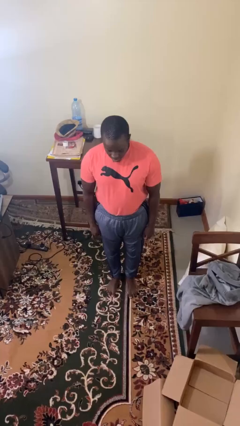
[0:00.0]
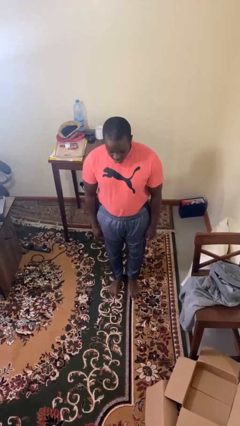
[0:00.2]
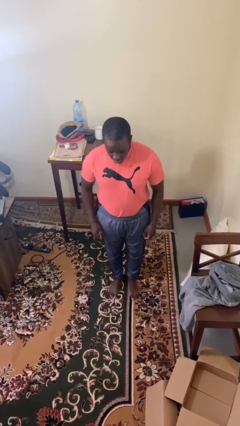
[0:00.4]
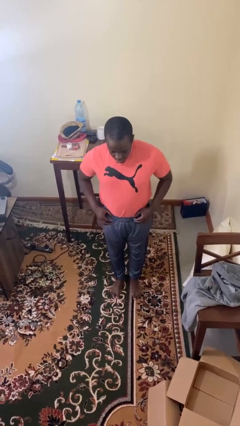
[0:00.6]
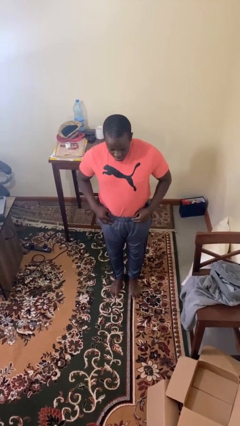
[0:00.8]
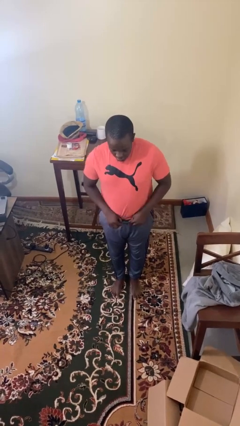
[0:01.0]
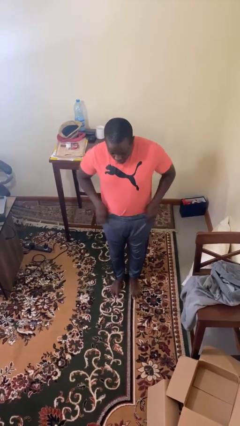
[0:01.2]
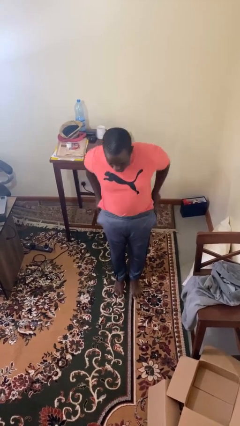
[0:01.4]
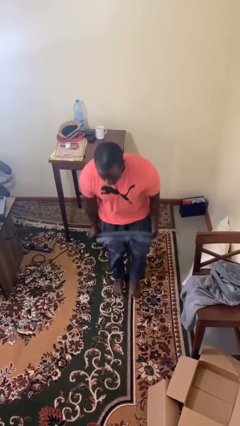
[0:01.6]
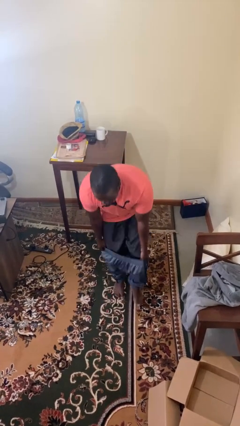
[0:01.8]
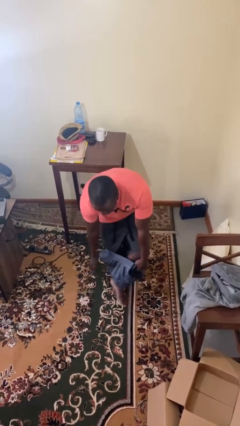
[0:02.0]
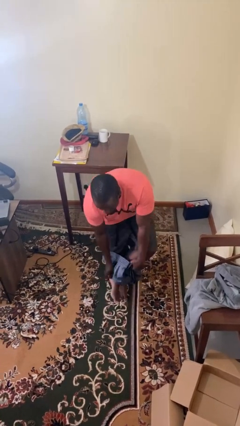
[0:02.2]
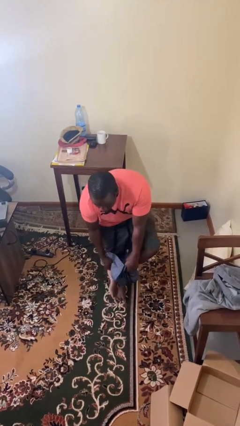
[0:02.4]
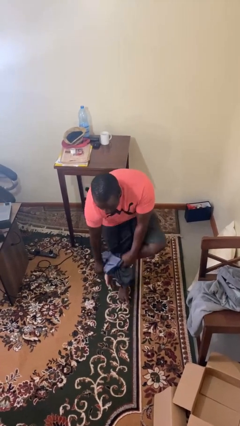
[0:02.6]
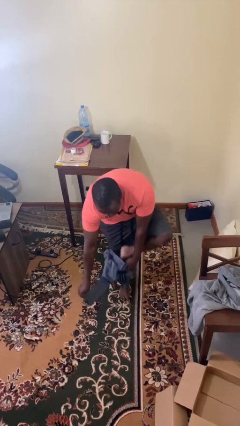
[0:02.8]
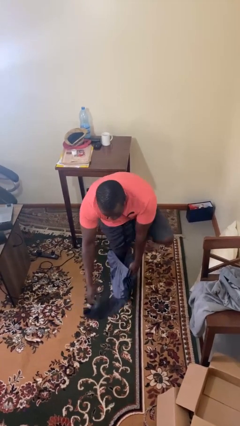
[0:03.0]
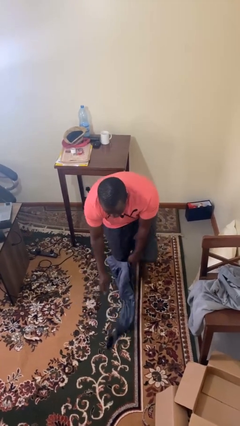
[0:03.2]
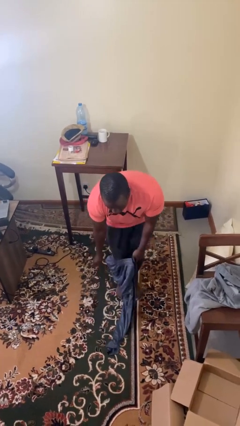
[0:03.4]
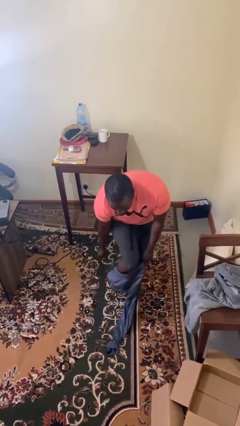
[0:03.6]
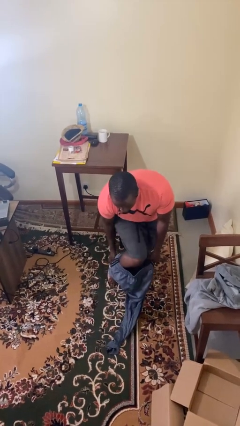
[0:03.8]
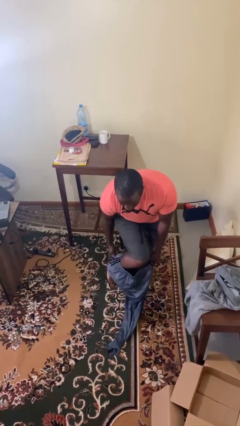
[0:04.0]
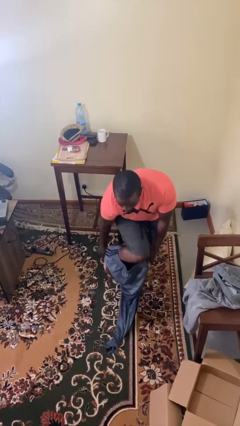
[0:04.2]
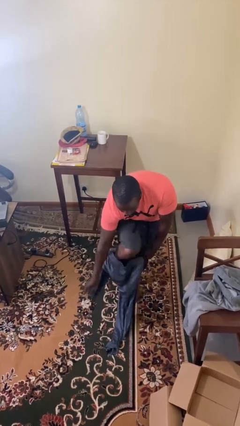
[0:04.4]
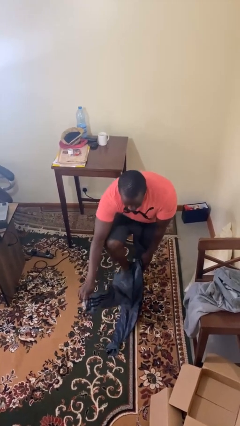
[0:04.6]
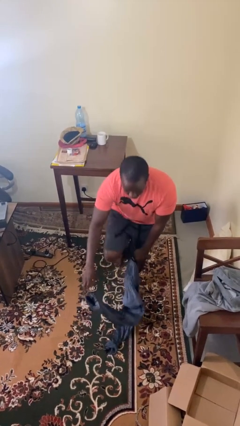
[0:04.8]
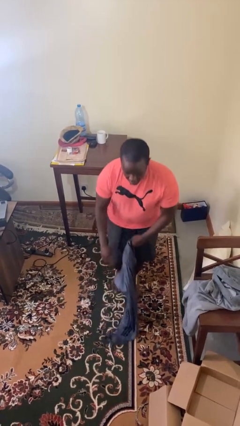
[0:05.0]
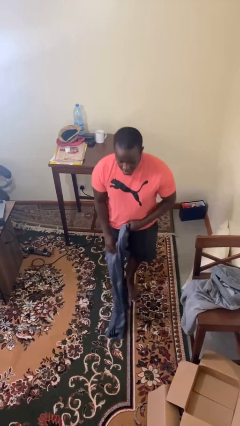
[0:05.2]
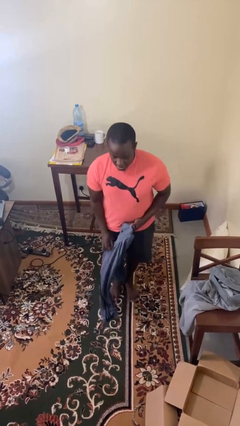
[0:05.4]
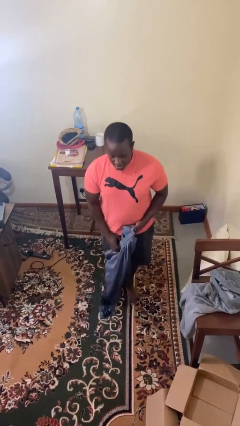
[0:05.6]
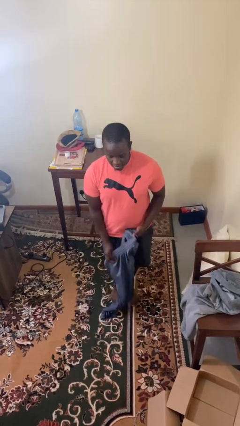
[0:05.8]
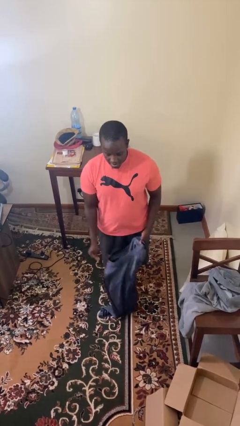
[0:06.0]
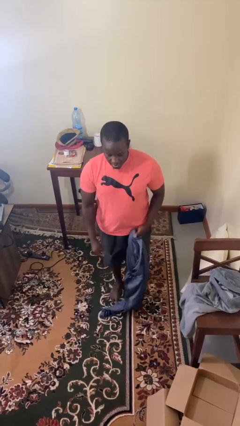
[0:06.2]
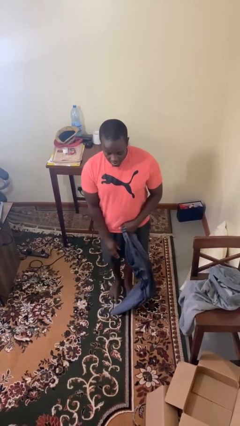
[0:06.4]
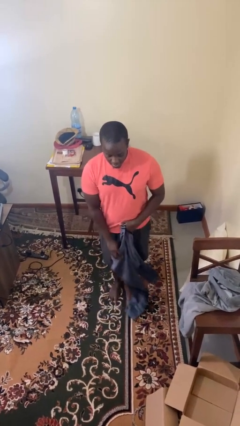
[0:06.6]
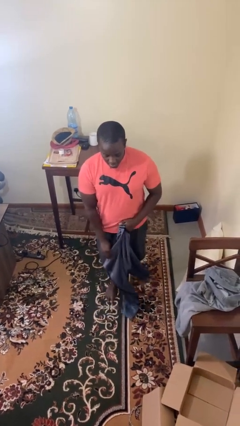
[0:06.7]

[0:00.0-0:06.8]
person takes off pants

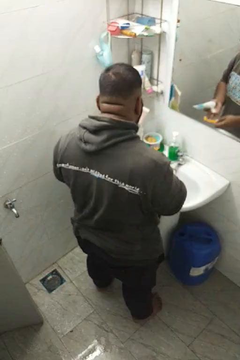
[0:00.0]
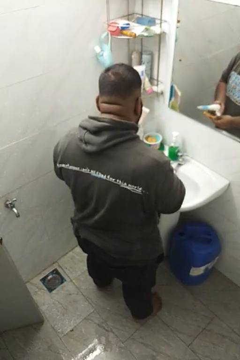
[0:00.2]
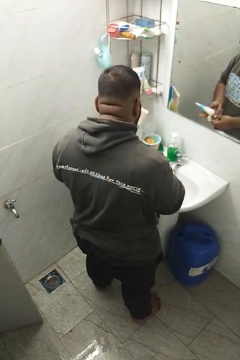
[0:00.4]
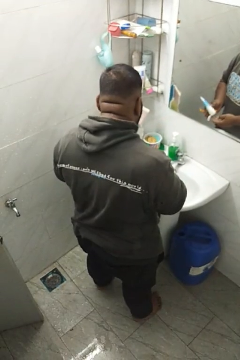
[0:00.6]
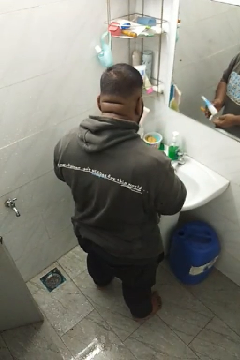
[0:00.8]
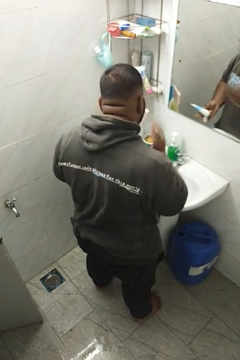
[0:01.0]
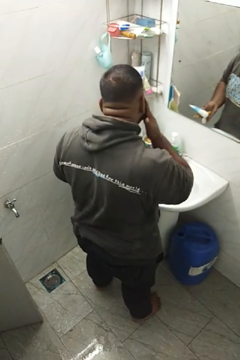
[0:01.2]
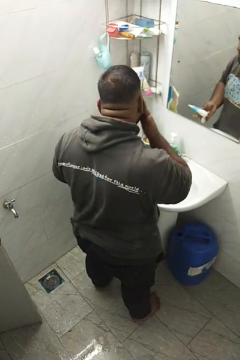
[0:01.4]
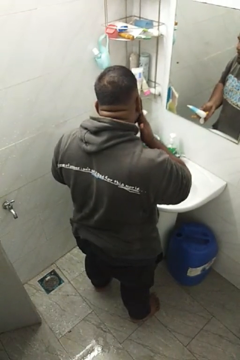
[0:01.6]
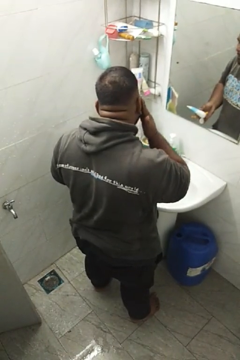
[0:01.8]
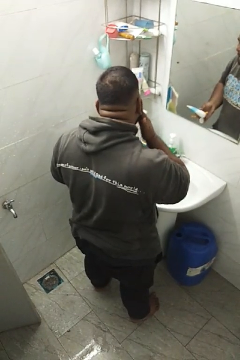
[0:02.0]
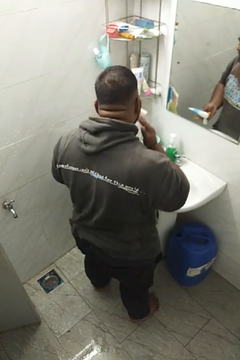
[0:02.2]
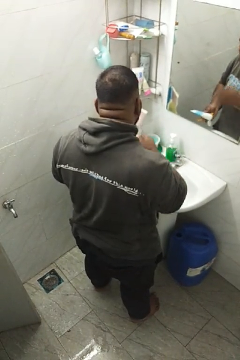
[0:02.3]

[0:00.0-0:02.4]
person applies shaving cream

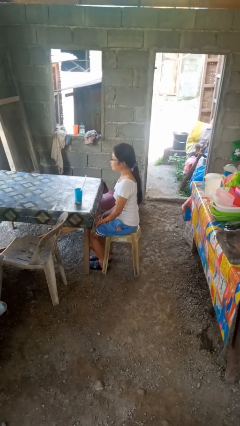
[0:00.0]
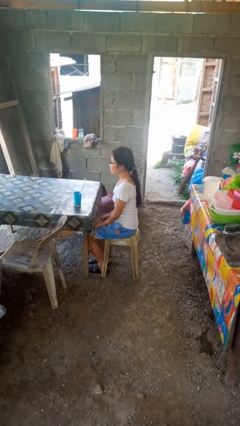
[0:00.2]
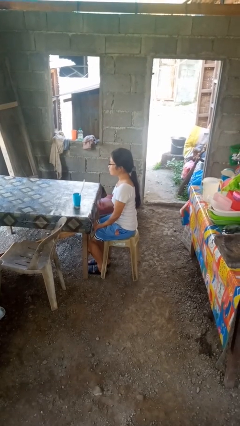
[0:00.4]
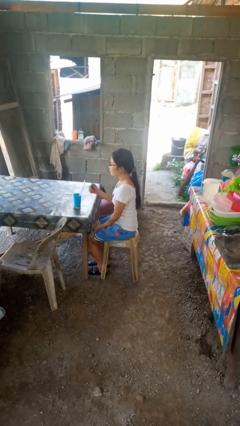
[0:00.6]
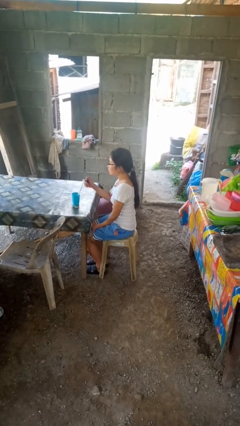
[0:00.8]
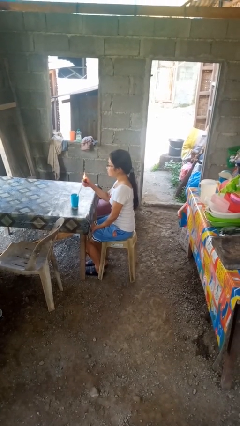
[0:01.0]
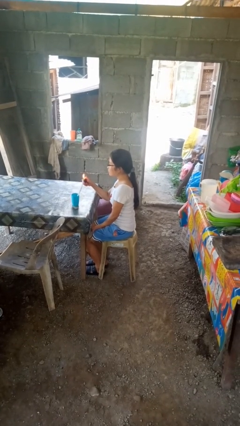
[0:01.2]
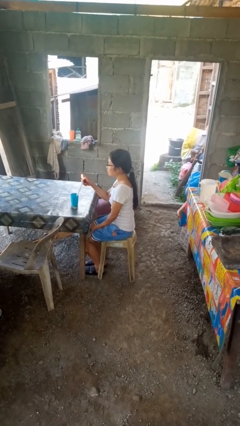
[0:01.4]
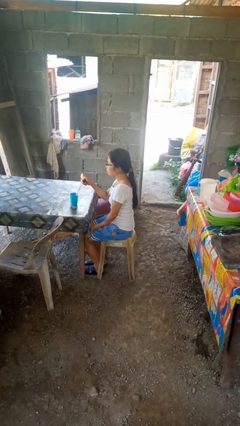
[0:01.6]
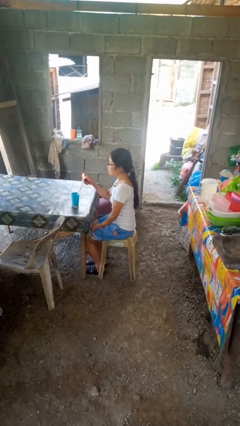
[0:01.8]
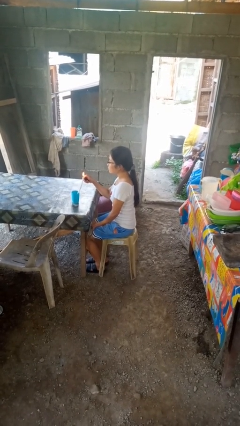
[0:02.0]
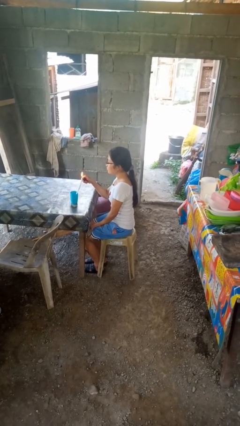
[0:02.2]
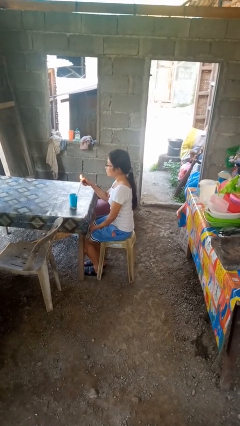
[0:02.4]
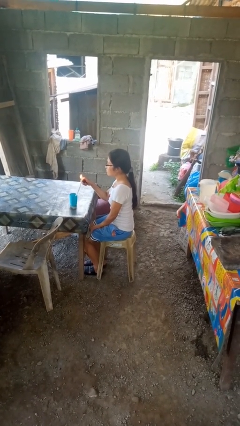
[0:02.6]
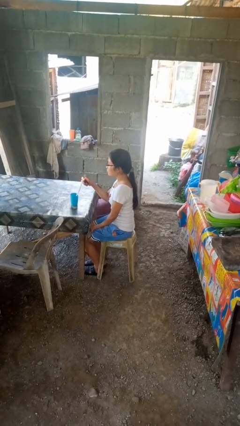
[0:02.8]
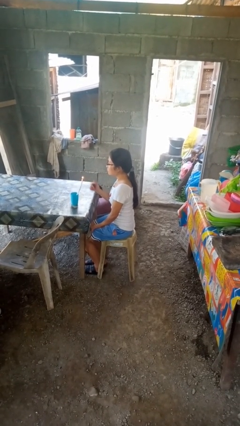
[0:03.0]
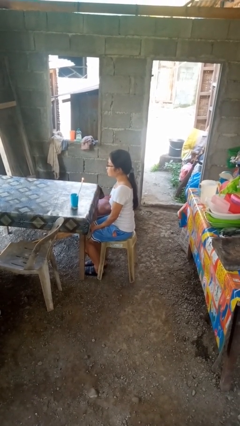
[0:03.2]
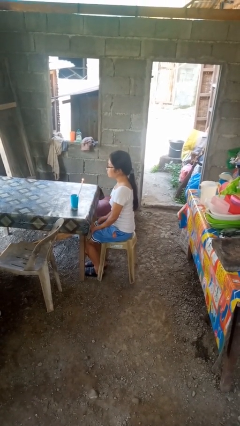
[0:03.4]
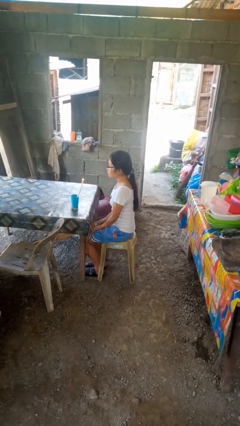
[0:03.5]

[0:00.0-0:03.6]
person lights candle

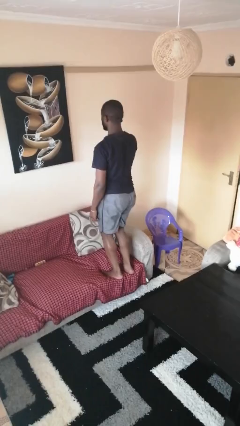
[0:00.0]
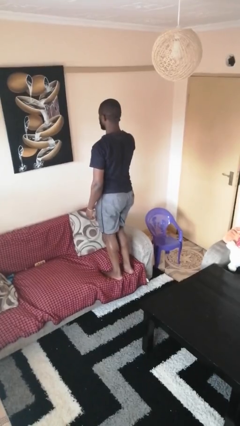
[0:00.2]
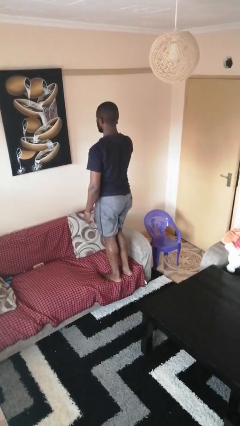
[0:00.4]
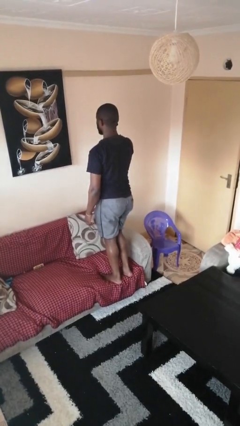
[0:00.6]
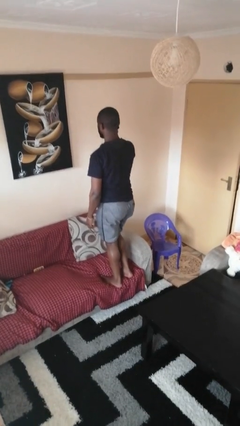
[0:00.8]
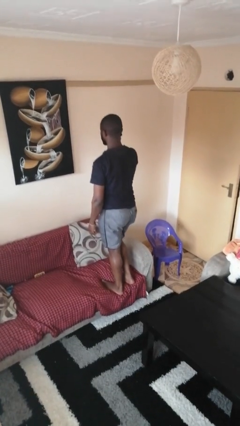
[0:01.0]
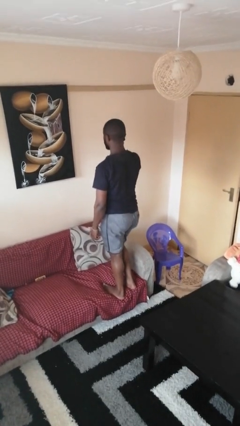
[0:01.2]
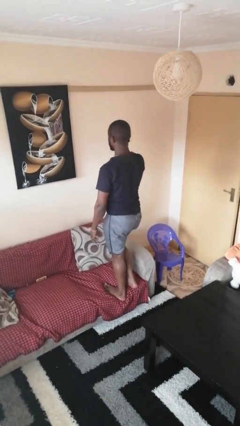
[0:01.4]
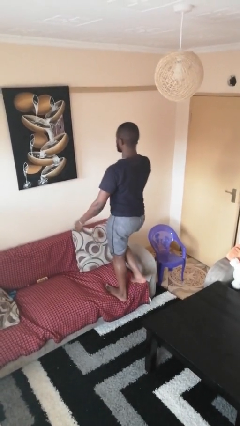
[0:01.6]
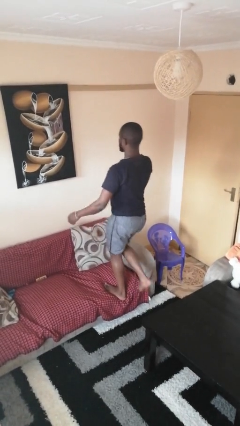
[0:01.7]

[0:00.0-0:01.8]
person climbs on couch

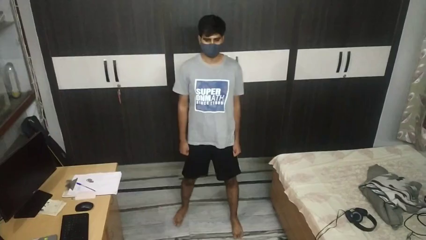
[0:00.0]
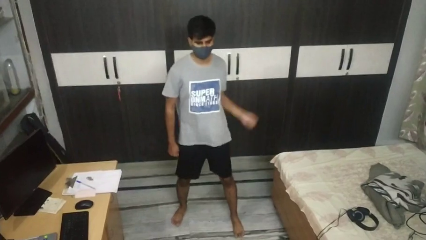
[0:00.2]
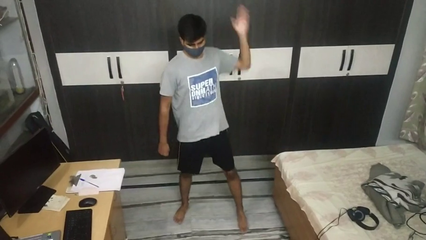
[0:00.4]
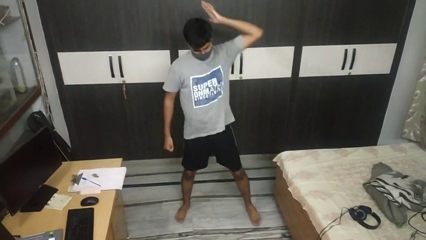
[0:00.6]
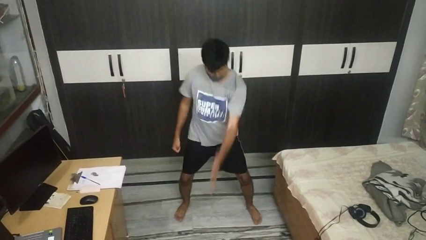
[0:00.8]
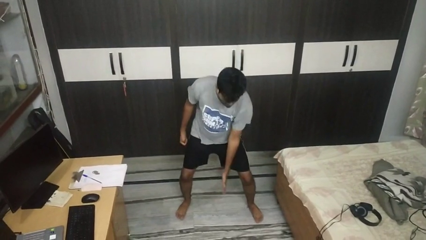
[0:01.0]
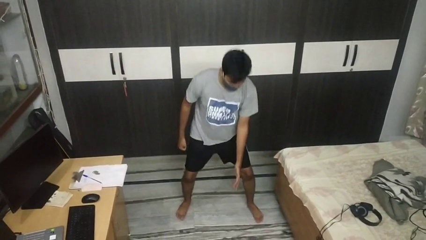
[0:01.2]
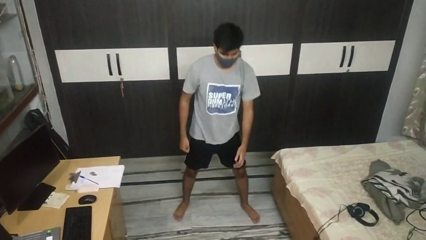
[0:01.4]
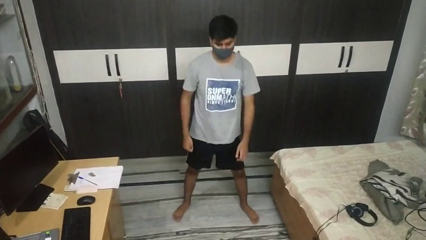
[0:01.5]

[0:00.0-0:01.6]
person karate chop

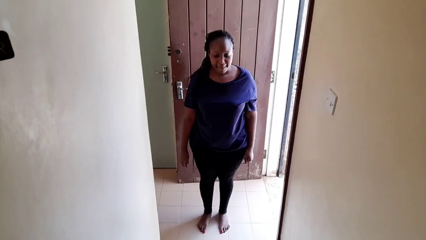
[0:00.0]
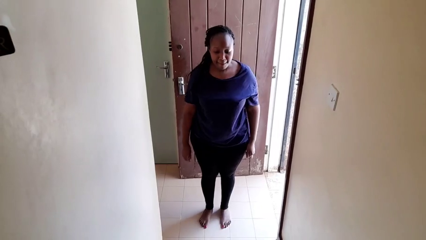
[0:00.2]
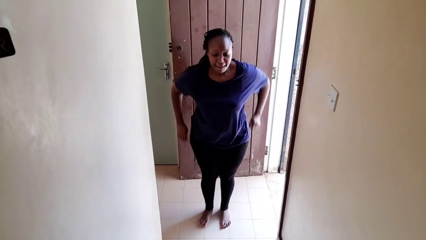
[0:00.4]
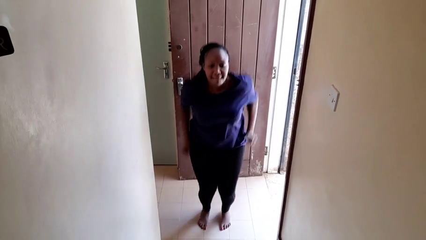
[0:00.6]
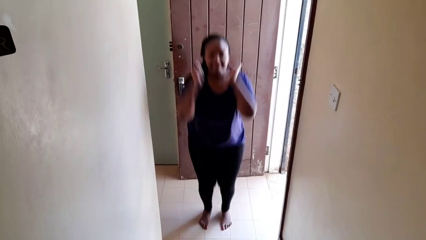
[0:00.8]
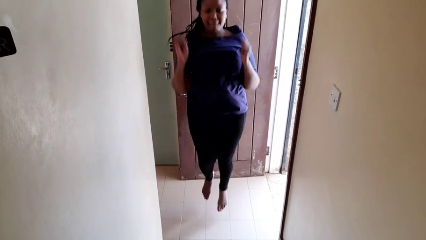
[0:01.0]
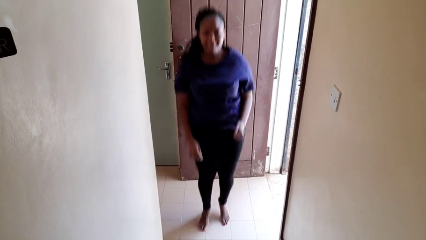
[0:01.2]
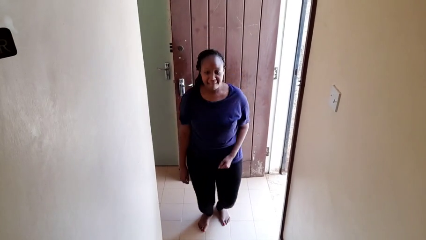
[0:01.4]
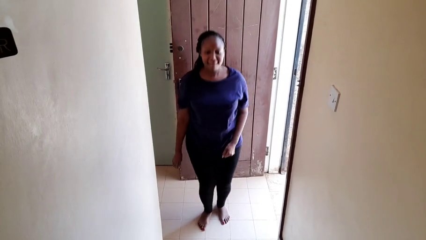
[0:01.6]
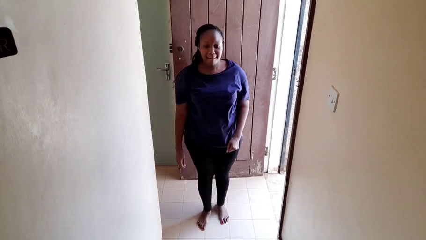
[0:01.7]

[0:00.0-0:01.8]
person jumps
